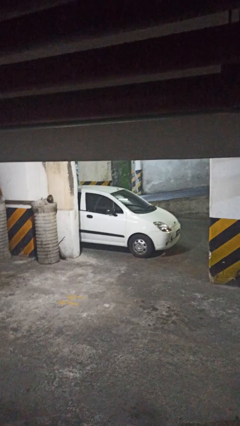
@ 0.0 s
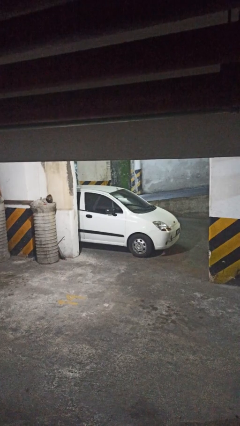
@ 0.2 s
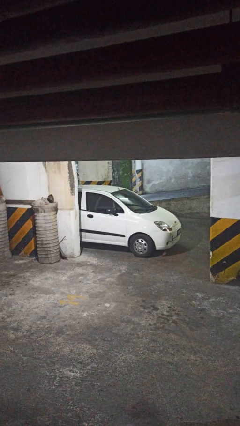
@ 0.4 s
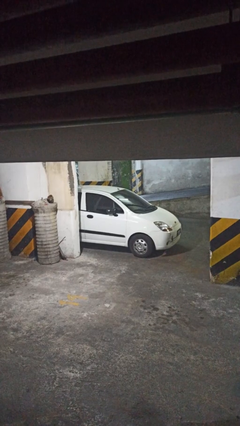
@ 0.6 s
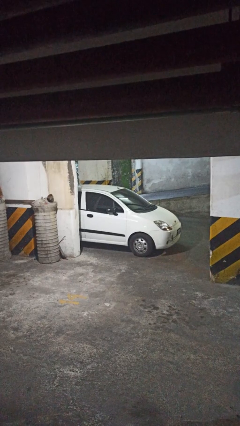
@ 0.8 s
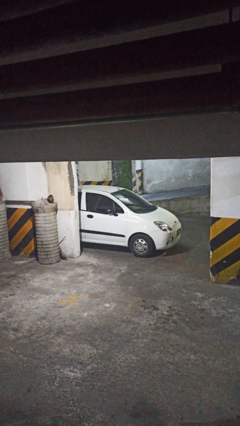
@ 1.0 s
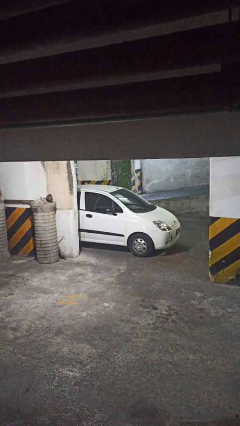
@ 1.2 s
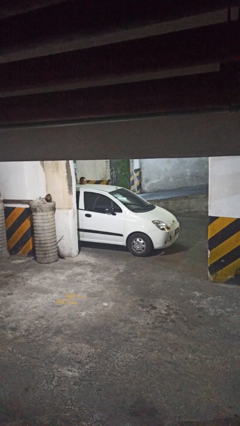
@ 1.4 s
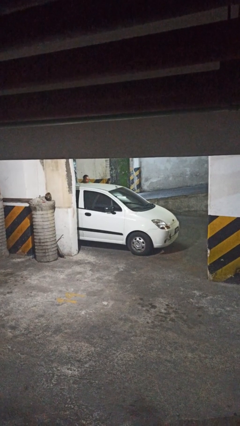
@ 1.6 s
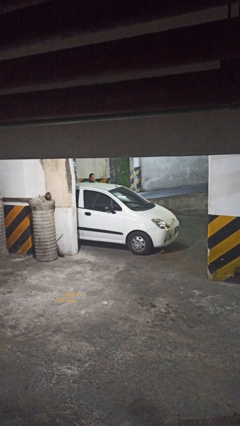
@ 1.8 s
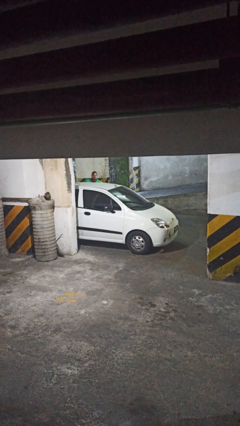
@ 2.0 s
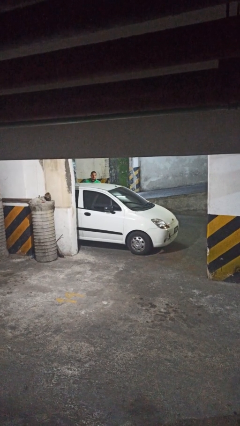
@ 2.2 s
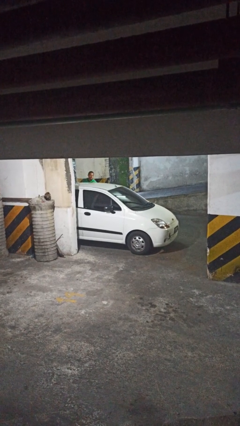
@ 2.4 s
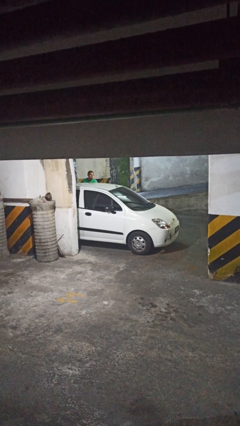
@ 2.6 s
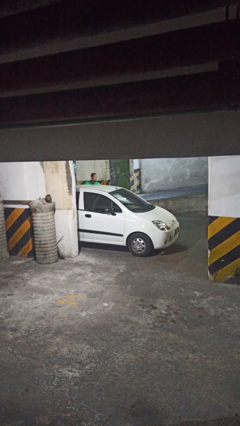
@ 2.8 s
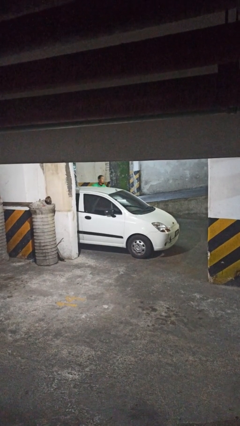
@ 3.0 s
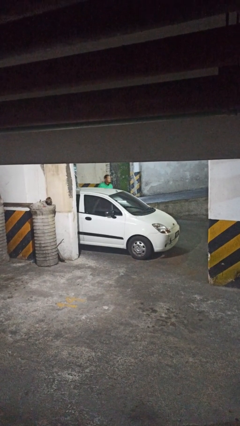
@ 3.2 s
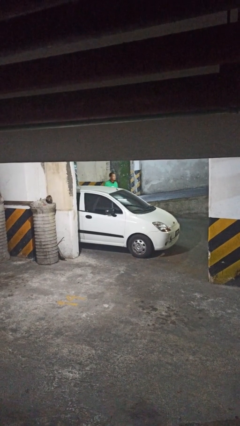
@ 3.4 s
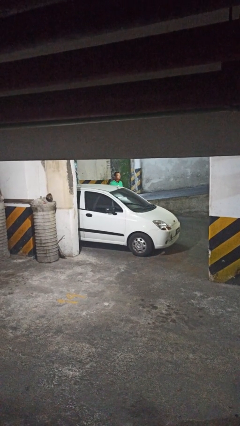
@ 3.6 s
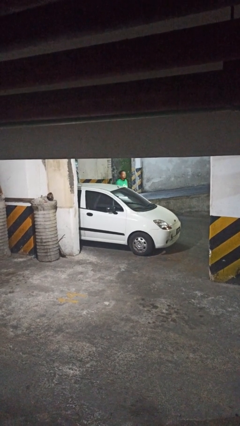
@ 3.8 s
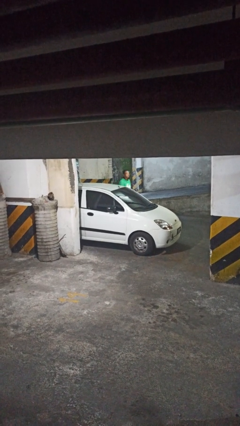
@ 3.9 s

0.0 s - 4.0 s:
car drops off person

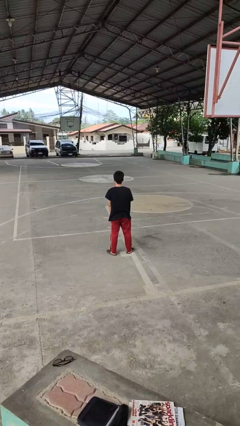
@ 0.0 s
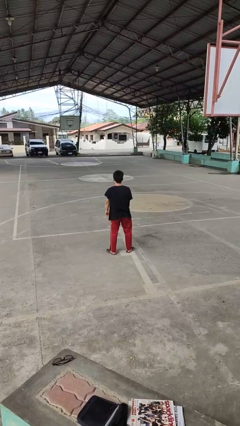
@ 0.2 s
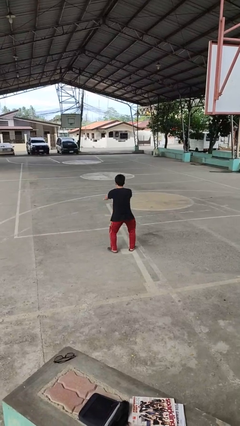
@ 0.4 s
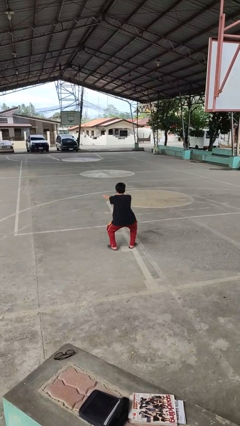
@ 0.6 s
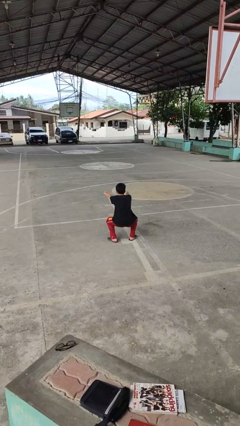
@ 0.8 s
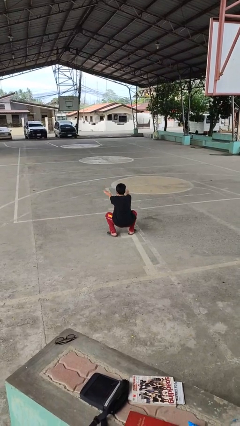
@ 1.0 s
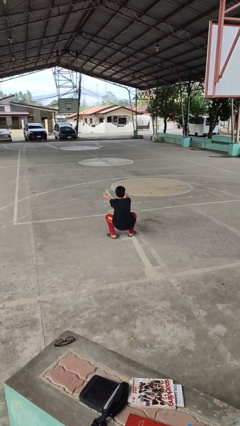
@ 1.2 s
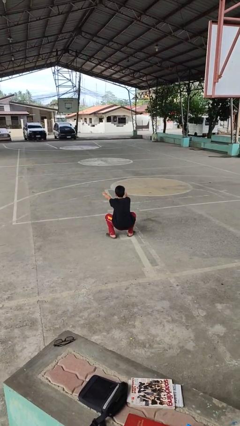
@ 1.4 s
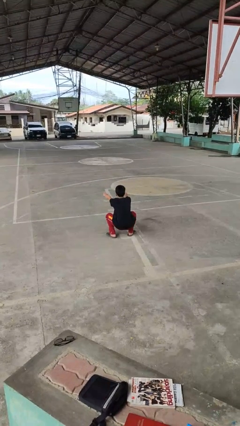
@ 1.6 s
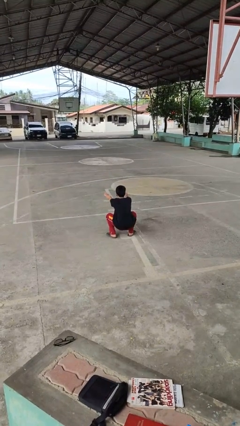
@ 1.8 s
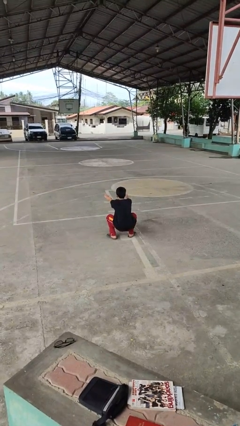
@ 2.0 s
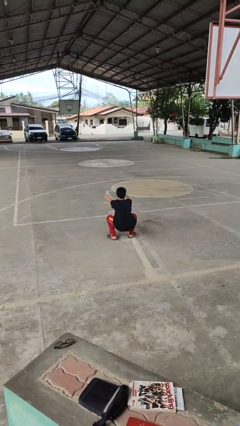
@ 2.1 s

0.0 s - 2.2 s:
person squats

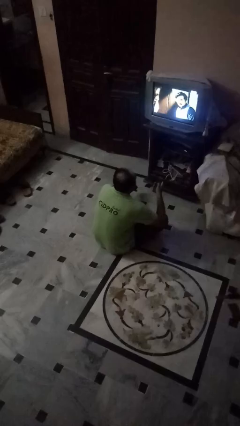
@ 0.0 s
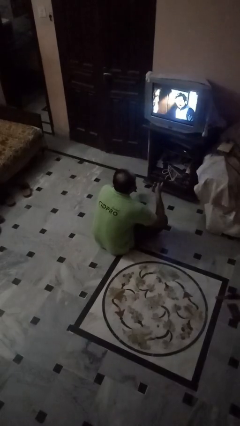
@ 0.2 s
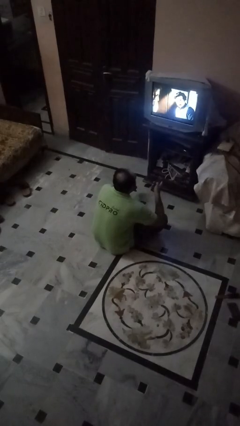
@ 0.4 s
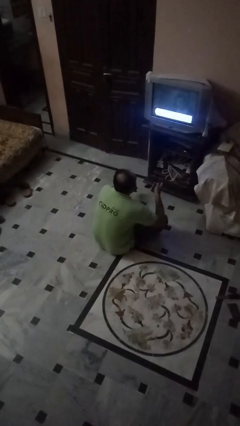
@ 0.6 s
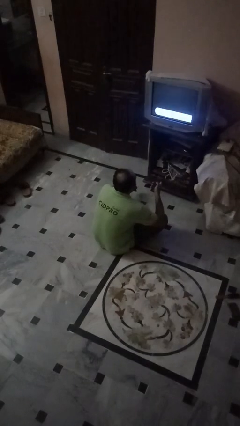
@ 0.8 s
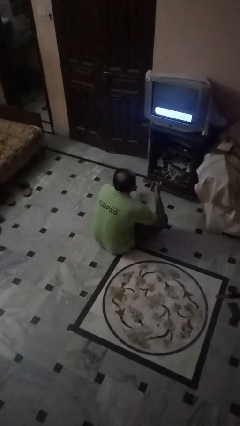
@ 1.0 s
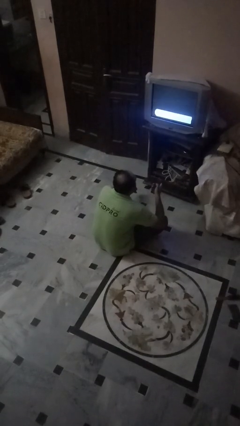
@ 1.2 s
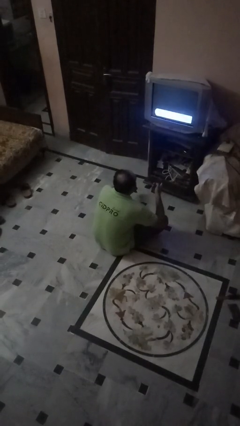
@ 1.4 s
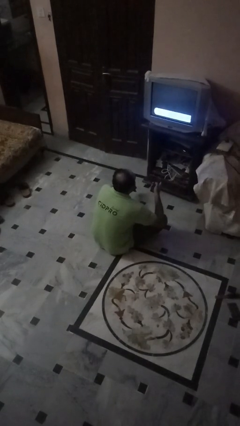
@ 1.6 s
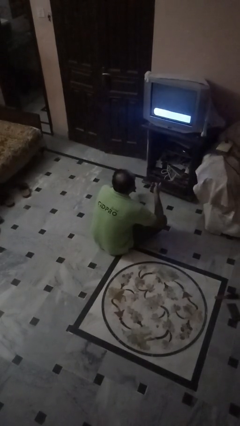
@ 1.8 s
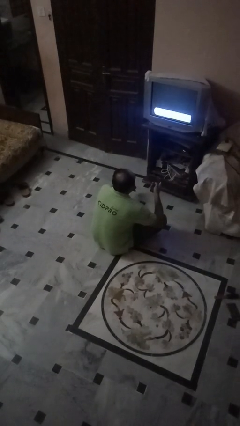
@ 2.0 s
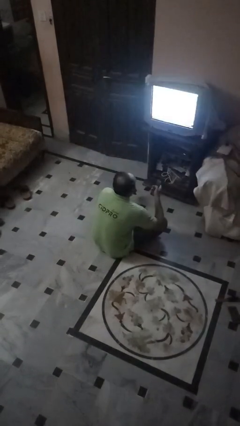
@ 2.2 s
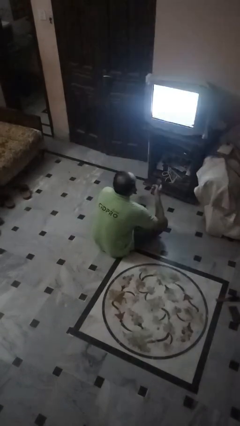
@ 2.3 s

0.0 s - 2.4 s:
person uses television remote

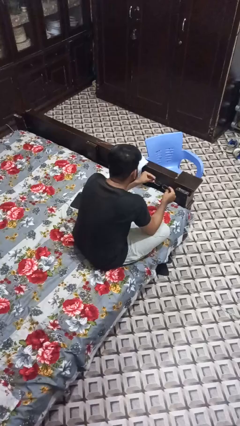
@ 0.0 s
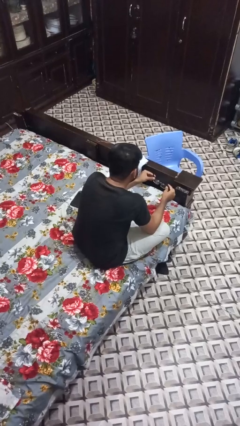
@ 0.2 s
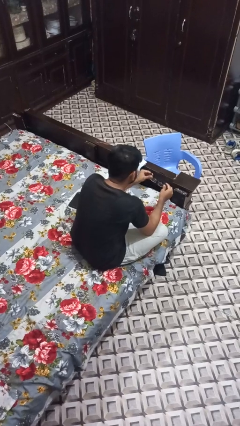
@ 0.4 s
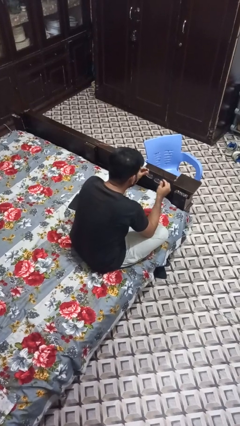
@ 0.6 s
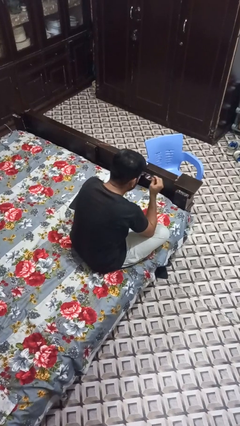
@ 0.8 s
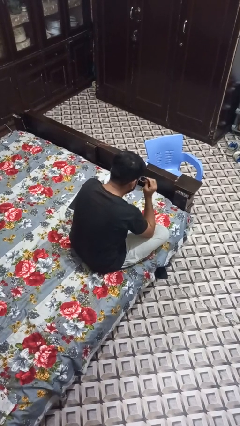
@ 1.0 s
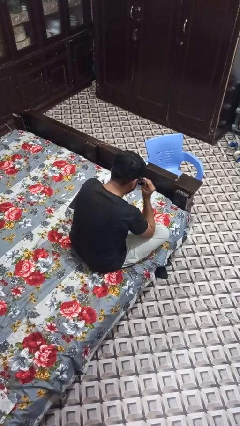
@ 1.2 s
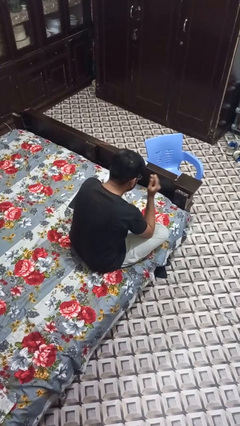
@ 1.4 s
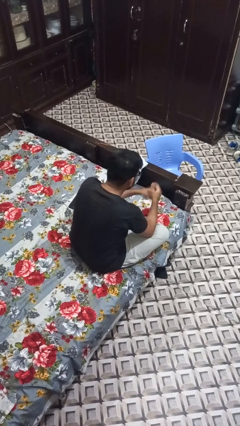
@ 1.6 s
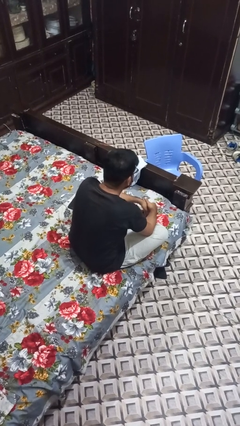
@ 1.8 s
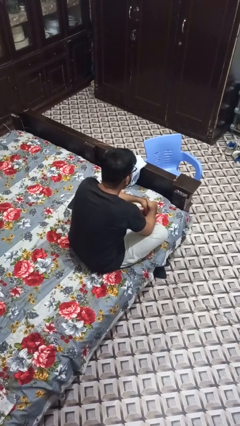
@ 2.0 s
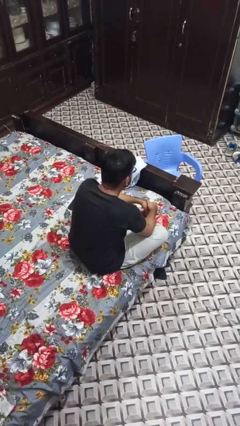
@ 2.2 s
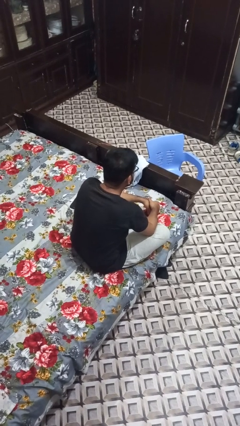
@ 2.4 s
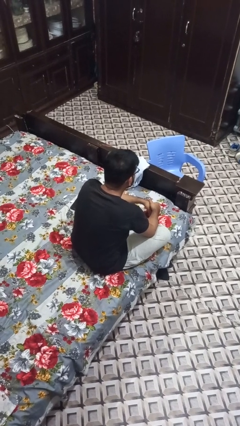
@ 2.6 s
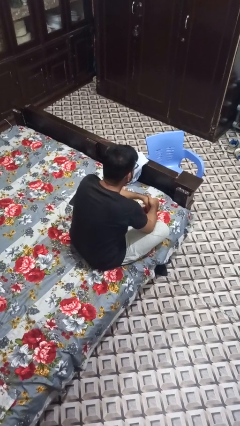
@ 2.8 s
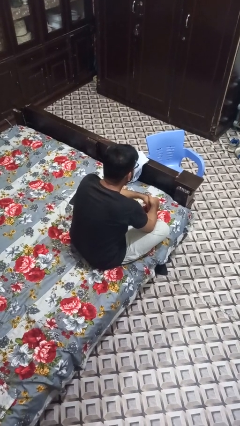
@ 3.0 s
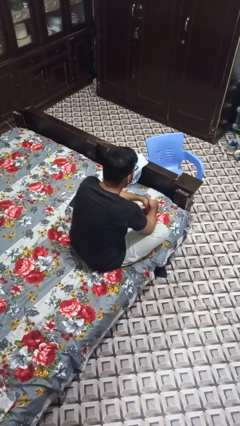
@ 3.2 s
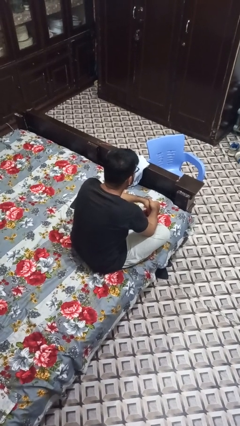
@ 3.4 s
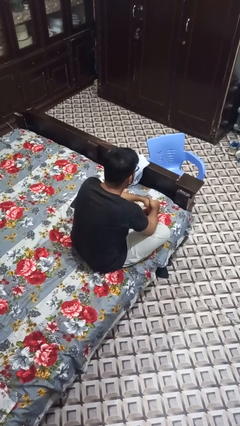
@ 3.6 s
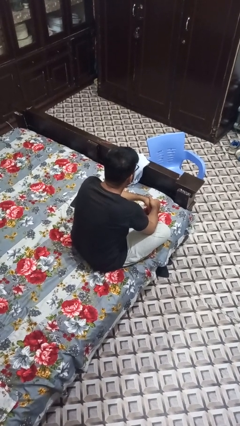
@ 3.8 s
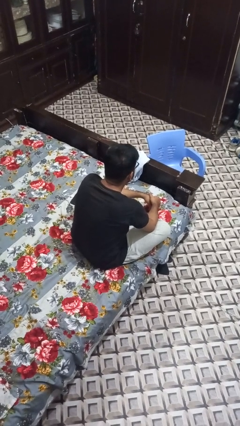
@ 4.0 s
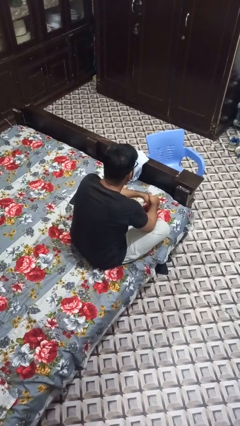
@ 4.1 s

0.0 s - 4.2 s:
person puts on glasses

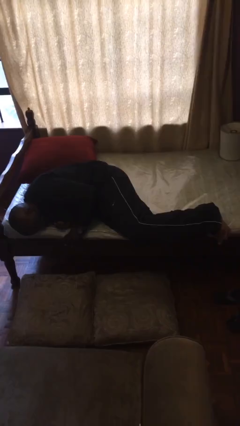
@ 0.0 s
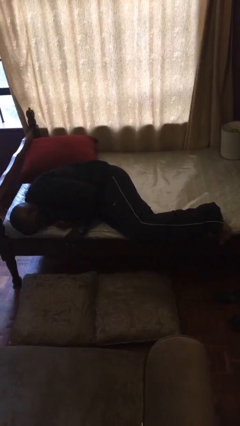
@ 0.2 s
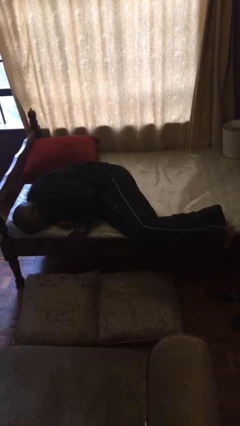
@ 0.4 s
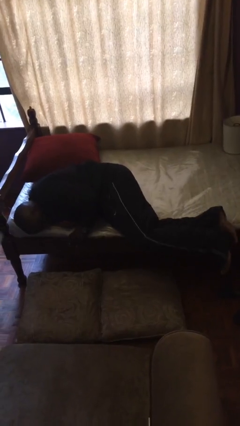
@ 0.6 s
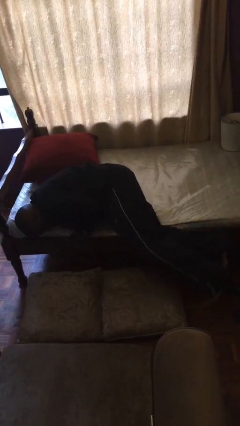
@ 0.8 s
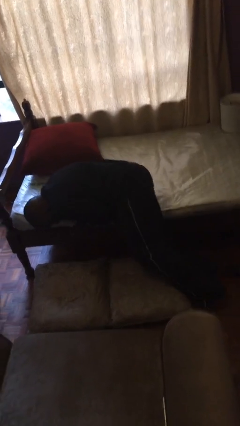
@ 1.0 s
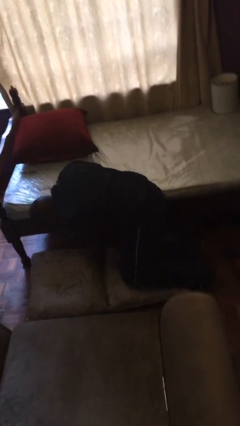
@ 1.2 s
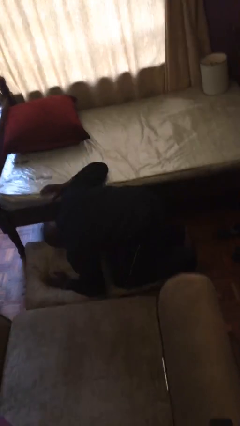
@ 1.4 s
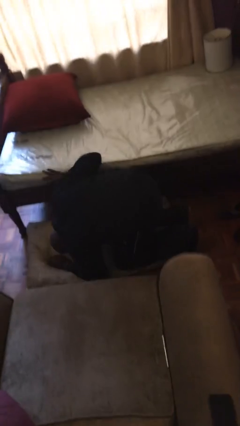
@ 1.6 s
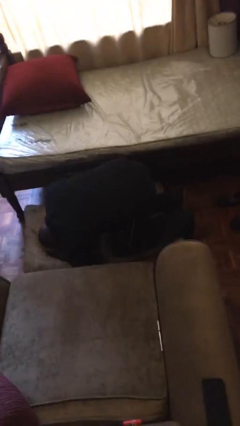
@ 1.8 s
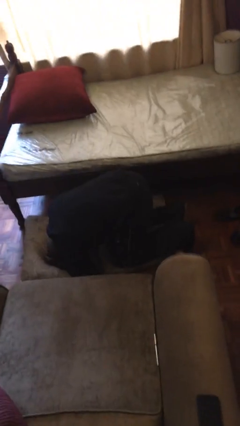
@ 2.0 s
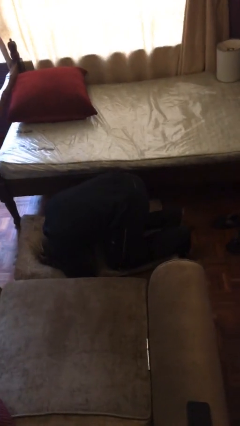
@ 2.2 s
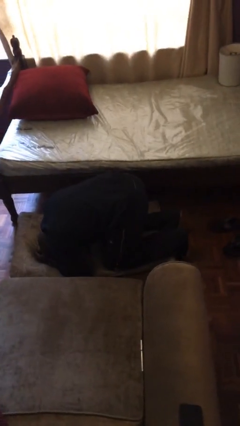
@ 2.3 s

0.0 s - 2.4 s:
person falls from bed

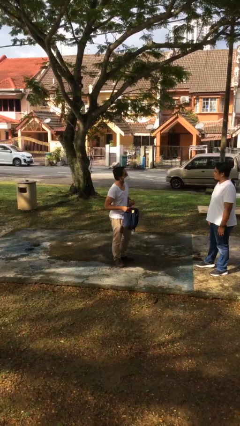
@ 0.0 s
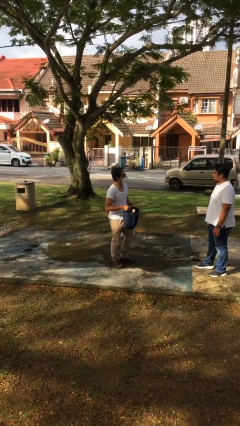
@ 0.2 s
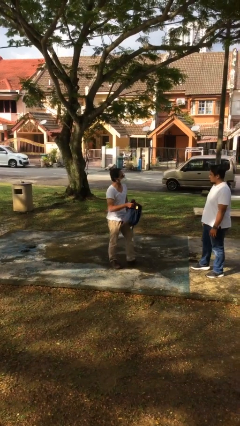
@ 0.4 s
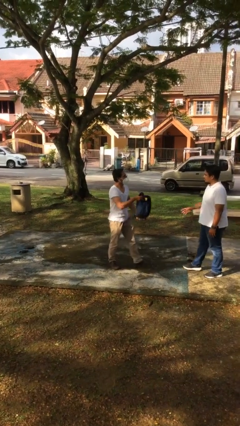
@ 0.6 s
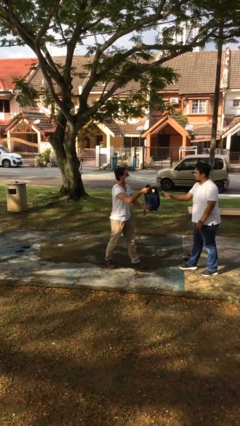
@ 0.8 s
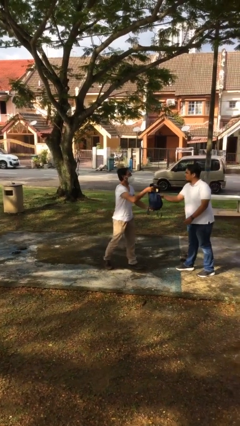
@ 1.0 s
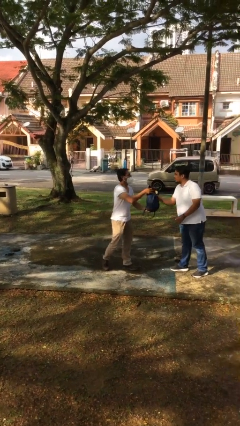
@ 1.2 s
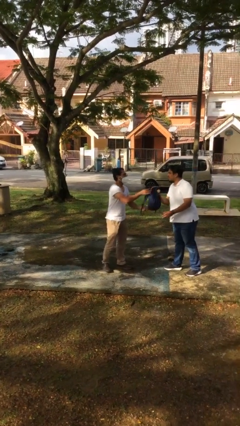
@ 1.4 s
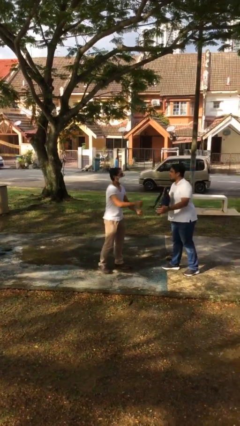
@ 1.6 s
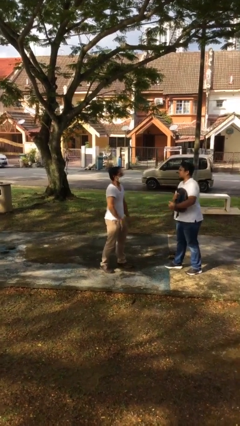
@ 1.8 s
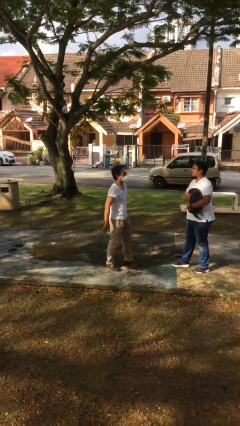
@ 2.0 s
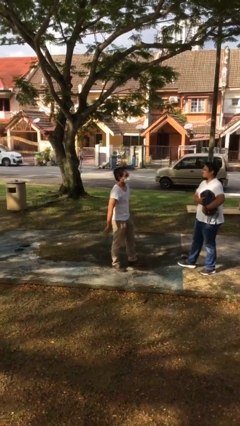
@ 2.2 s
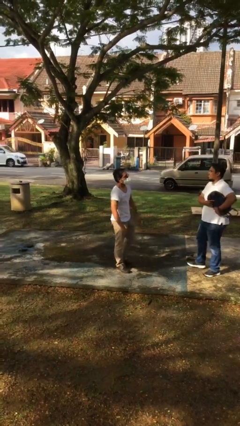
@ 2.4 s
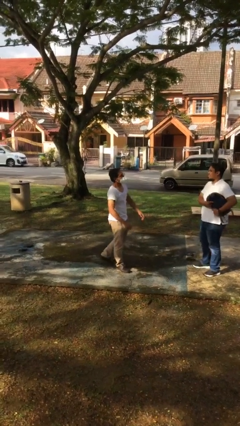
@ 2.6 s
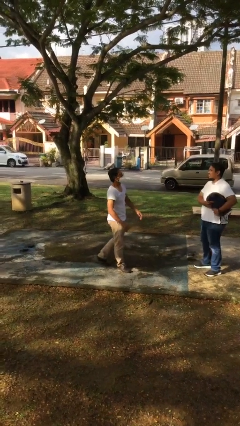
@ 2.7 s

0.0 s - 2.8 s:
person transfers object to person
